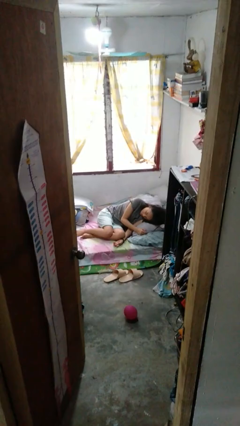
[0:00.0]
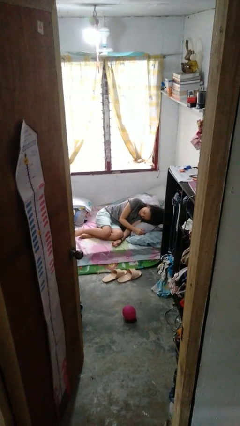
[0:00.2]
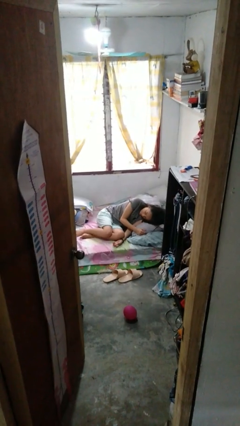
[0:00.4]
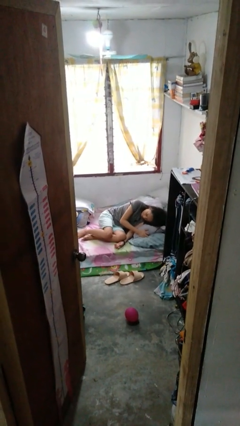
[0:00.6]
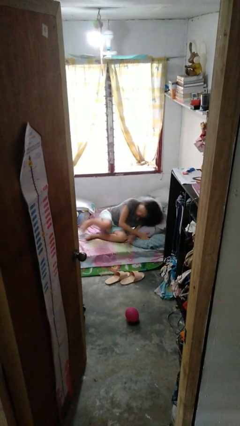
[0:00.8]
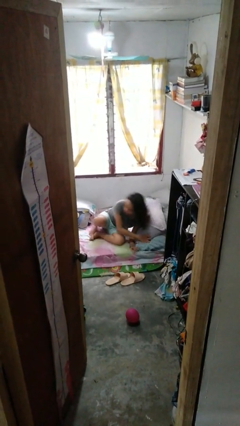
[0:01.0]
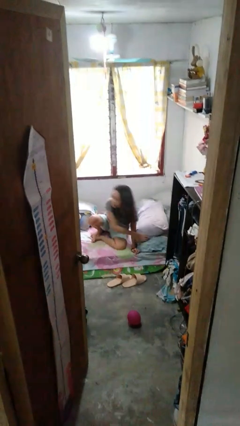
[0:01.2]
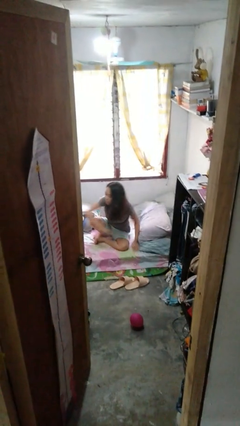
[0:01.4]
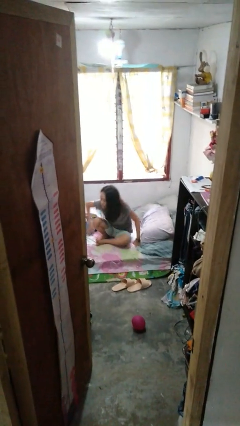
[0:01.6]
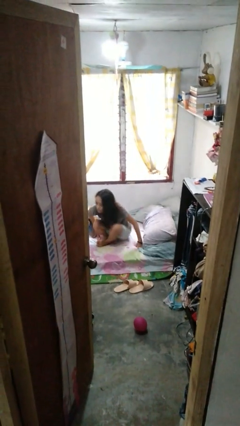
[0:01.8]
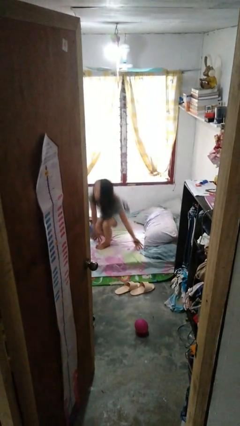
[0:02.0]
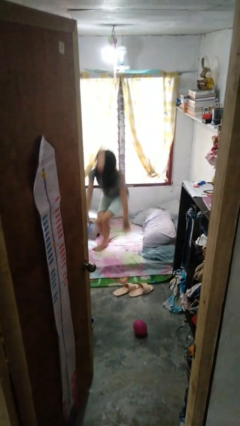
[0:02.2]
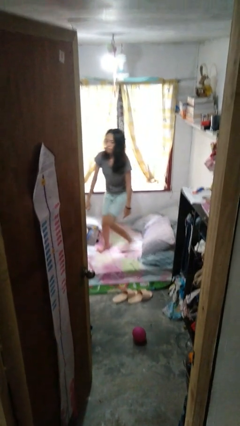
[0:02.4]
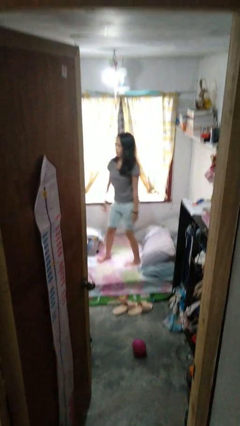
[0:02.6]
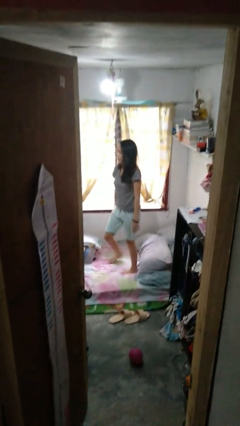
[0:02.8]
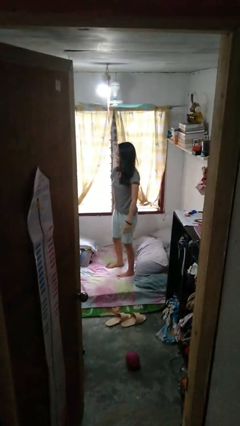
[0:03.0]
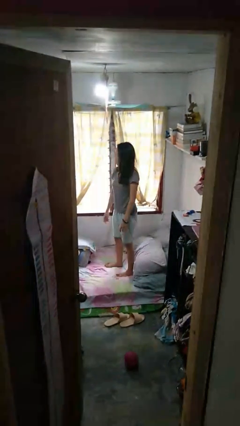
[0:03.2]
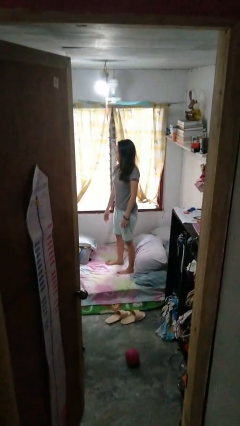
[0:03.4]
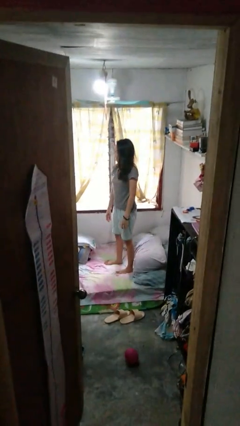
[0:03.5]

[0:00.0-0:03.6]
person stands up

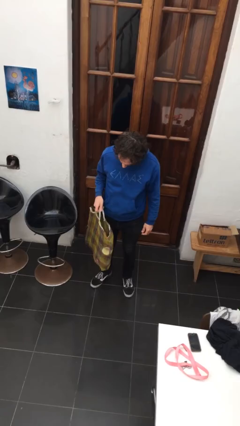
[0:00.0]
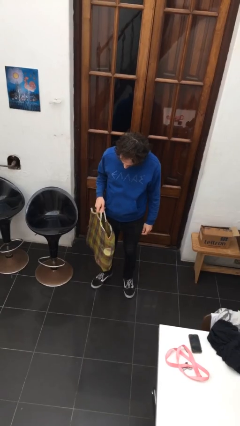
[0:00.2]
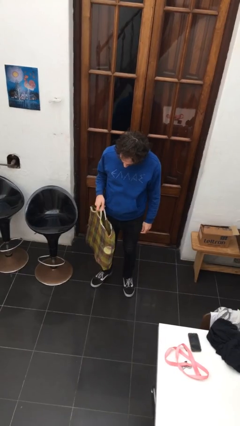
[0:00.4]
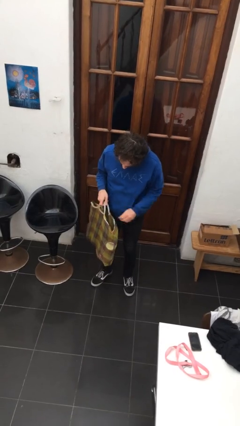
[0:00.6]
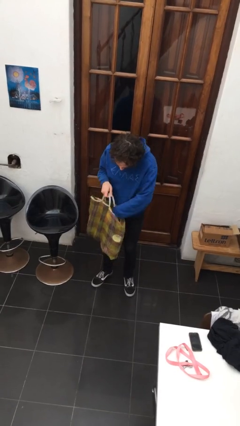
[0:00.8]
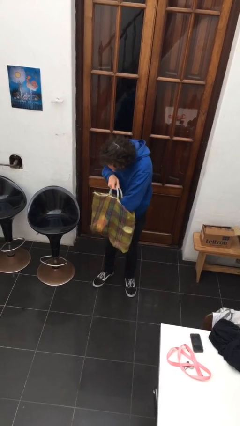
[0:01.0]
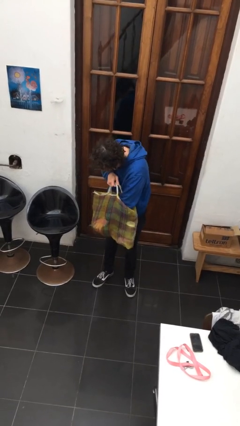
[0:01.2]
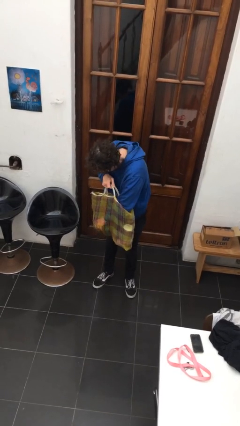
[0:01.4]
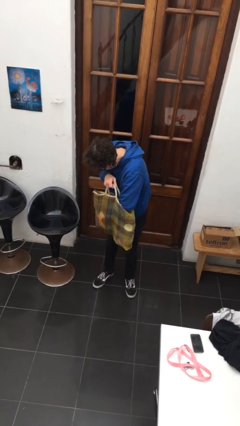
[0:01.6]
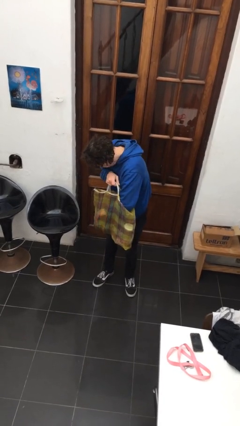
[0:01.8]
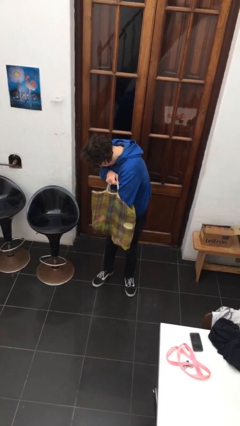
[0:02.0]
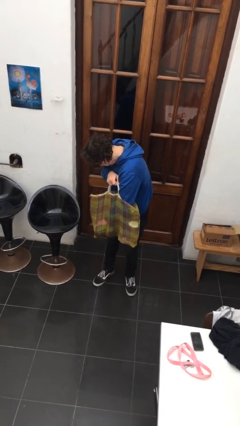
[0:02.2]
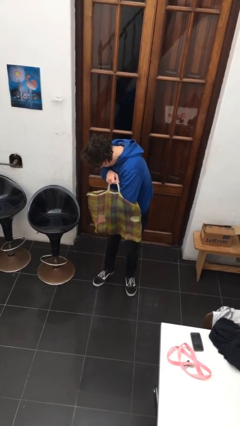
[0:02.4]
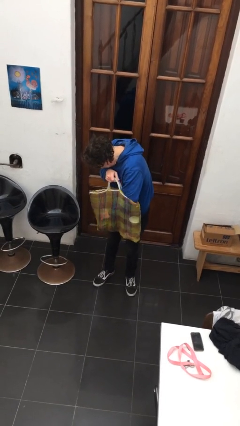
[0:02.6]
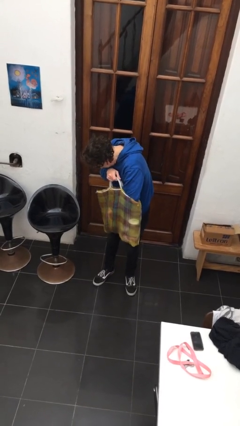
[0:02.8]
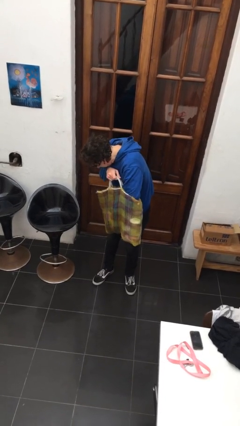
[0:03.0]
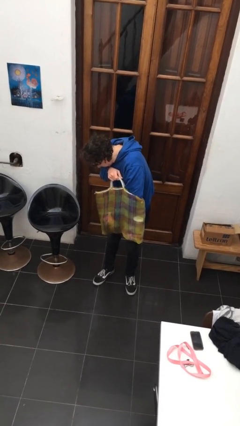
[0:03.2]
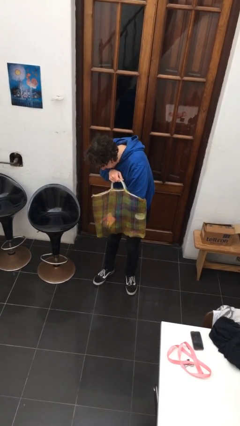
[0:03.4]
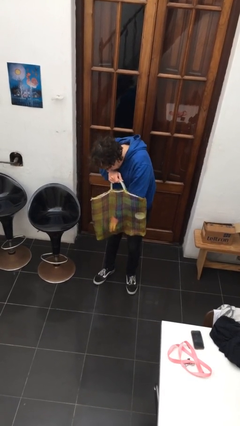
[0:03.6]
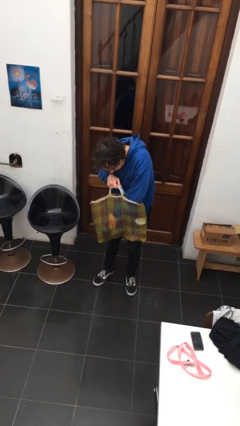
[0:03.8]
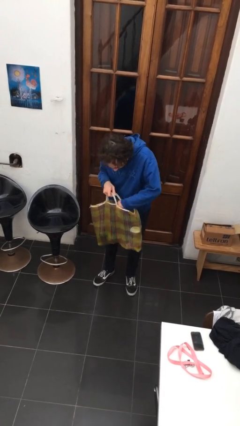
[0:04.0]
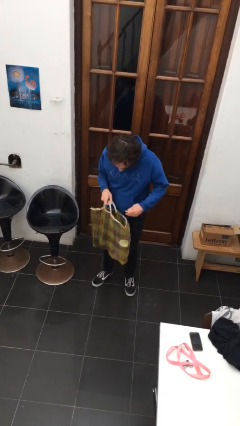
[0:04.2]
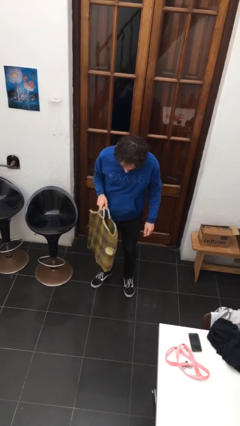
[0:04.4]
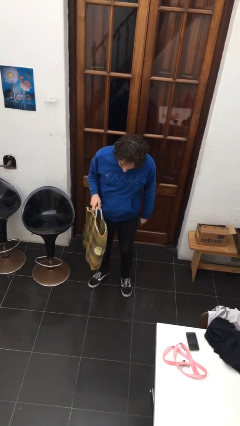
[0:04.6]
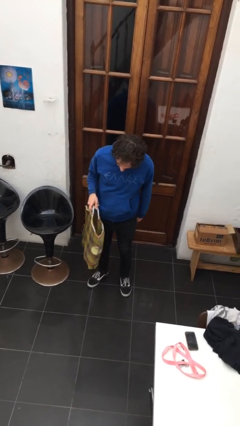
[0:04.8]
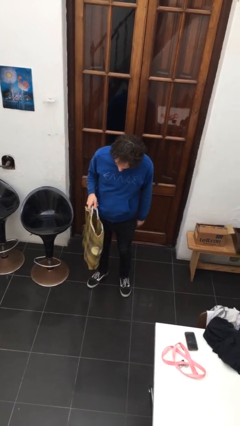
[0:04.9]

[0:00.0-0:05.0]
person searches in bag

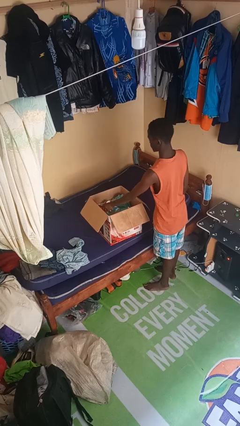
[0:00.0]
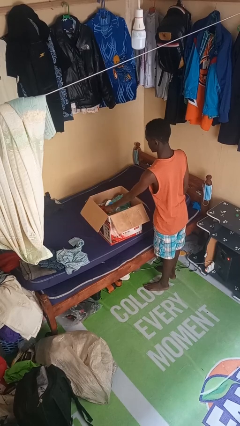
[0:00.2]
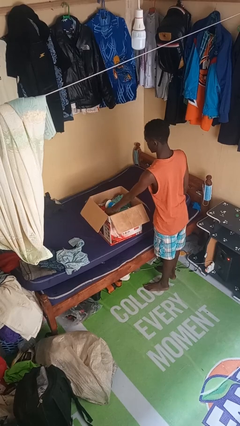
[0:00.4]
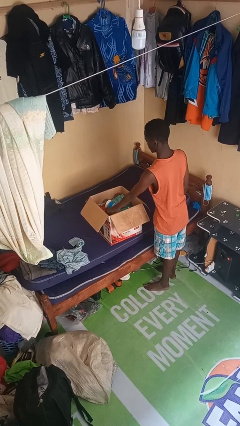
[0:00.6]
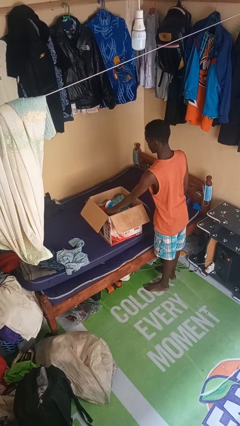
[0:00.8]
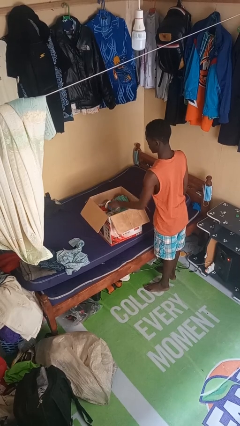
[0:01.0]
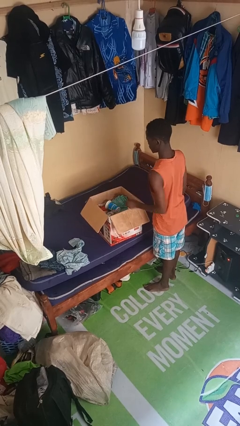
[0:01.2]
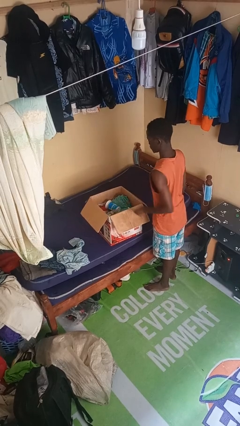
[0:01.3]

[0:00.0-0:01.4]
person puts object into box

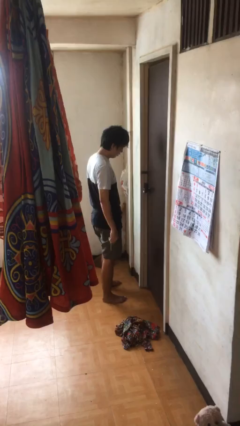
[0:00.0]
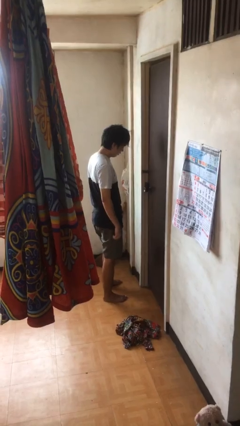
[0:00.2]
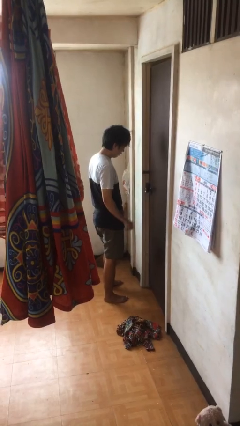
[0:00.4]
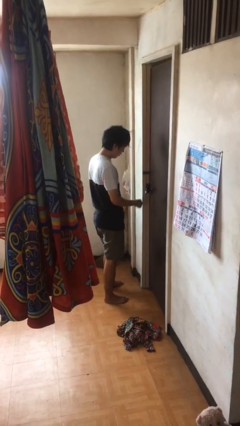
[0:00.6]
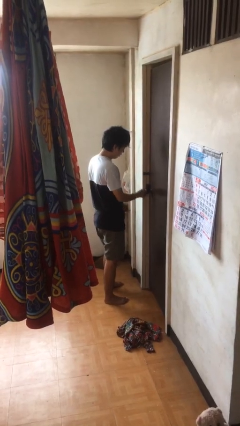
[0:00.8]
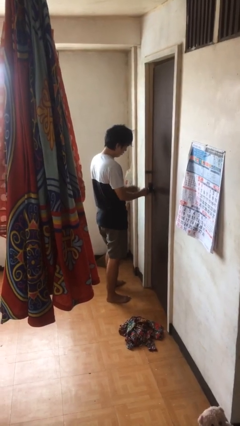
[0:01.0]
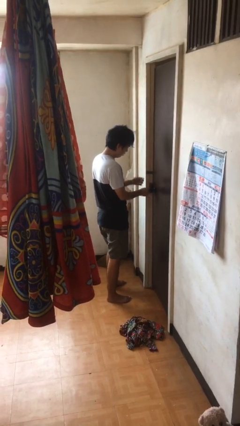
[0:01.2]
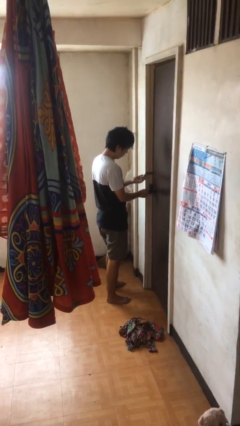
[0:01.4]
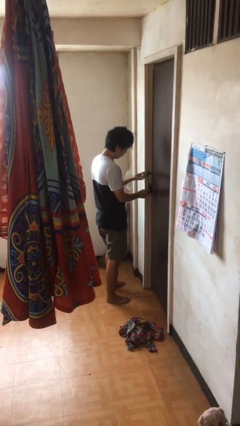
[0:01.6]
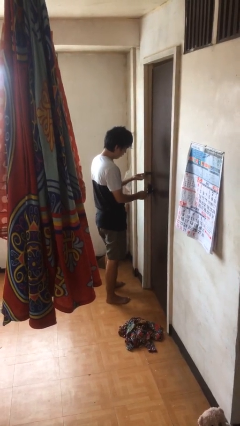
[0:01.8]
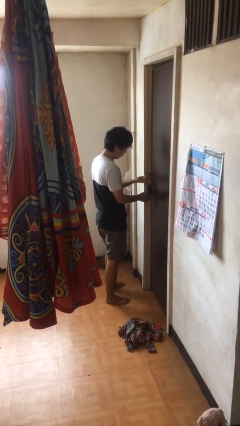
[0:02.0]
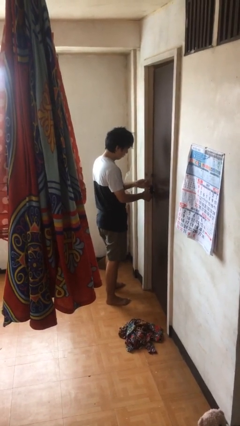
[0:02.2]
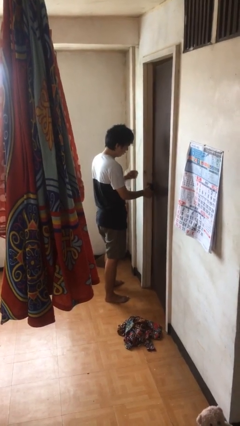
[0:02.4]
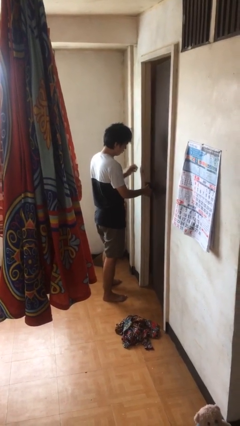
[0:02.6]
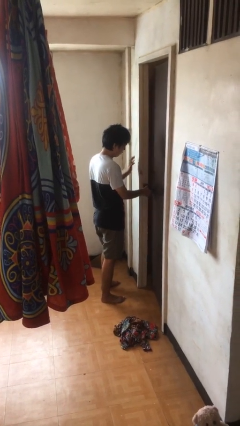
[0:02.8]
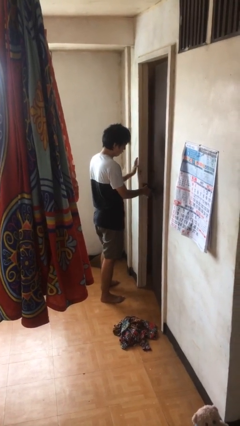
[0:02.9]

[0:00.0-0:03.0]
person unlocks door with keys

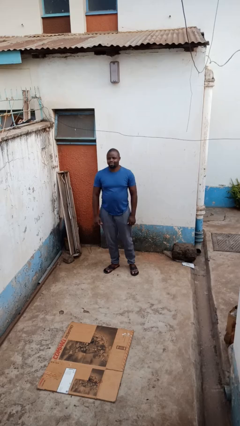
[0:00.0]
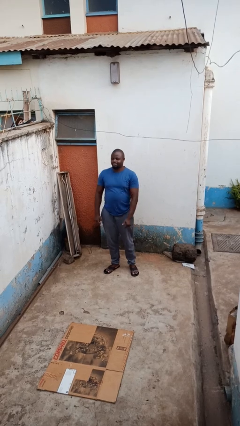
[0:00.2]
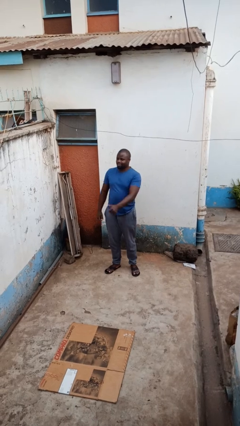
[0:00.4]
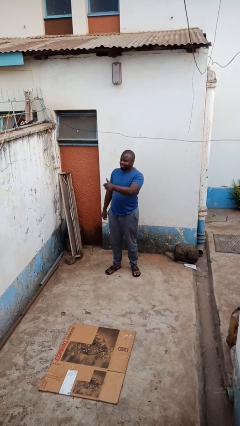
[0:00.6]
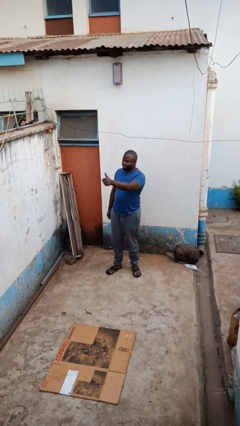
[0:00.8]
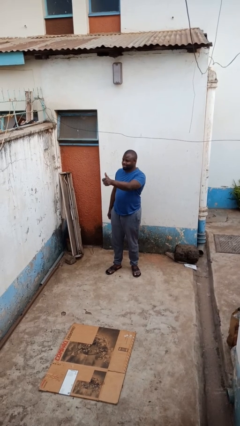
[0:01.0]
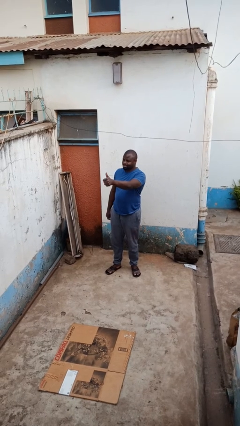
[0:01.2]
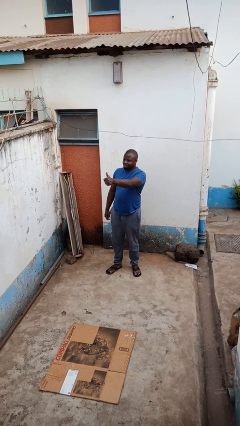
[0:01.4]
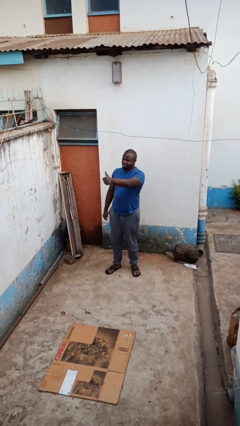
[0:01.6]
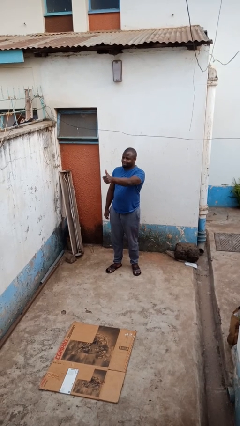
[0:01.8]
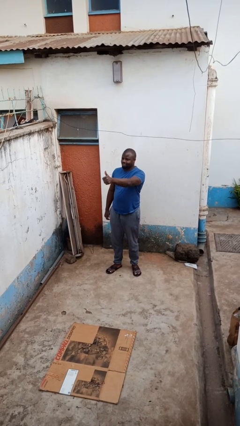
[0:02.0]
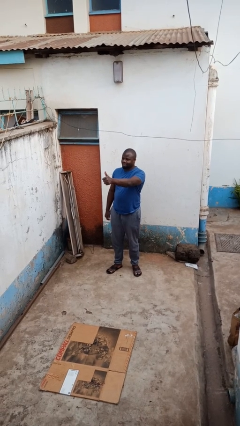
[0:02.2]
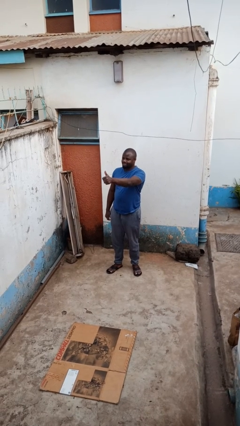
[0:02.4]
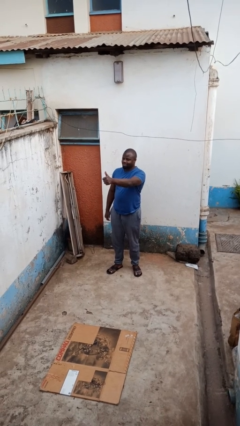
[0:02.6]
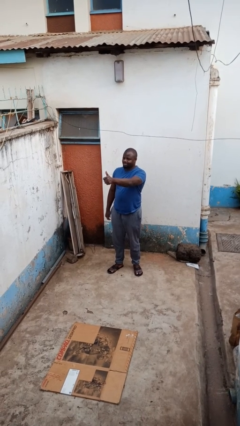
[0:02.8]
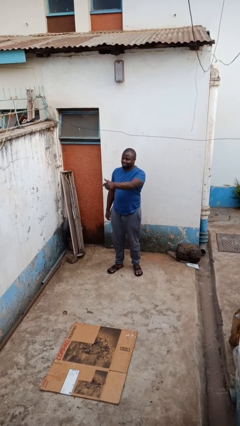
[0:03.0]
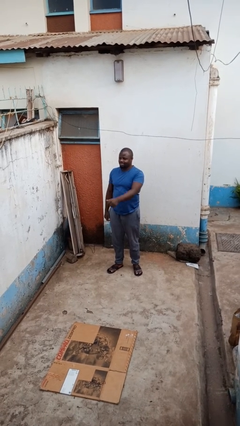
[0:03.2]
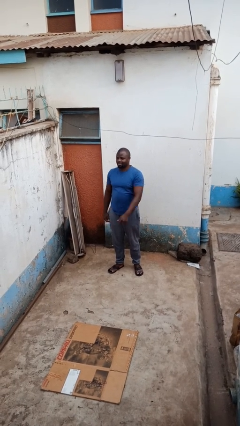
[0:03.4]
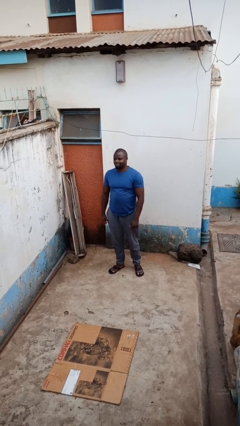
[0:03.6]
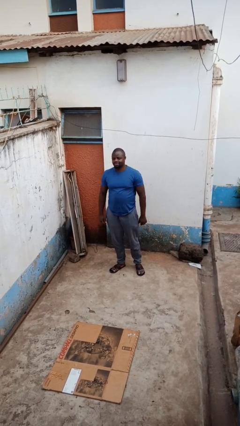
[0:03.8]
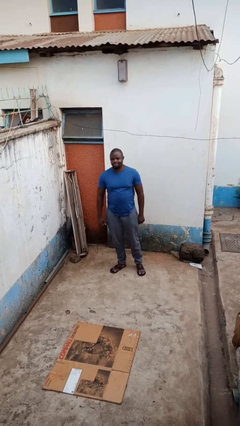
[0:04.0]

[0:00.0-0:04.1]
person gestures thumbs up

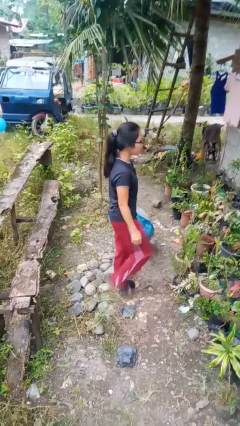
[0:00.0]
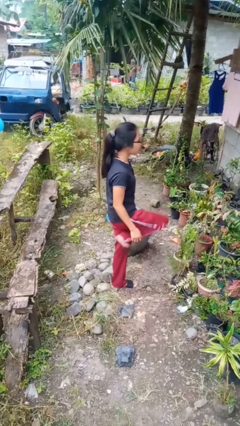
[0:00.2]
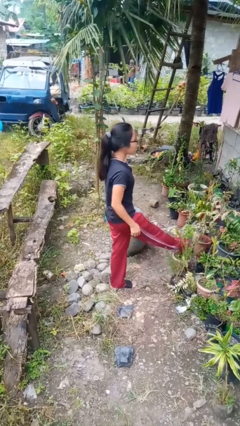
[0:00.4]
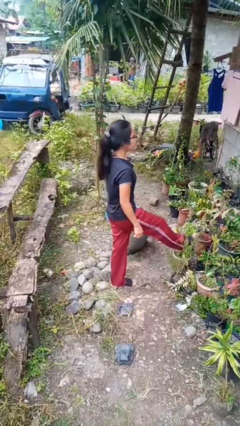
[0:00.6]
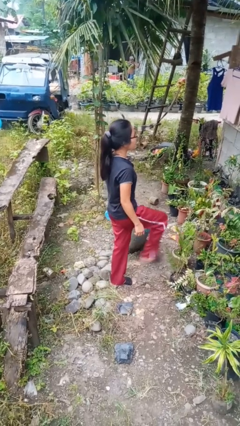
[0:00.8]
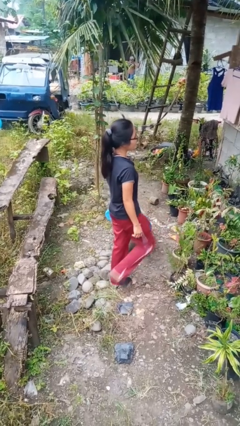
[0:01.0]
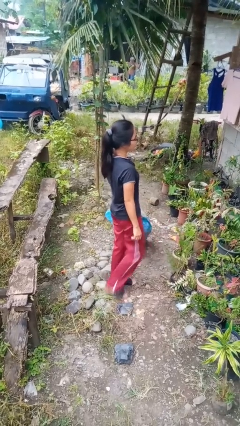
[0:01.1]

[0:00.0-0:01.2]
person karate kicks
